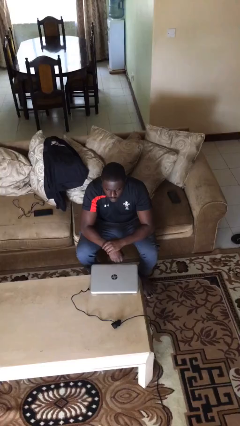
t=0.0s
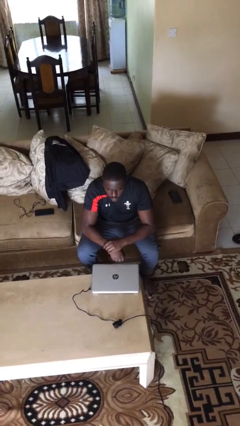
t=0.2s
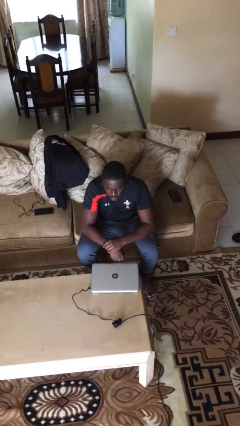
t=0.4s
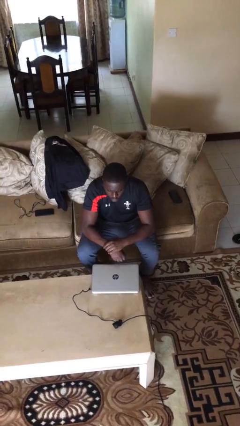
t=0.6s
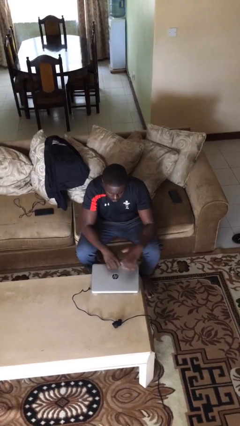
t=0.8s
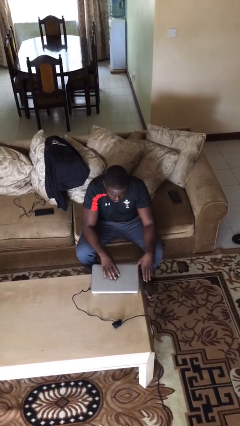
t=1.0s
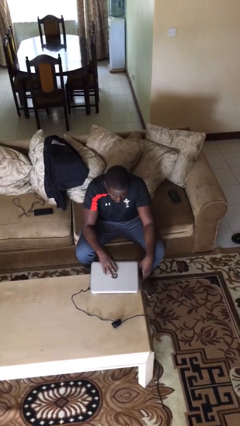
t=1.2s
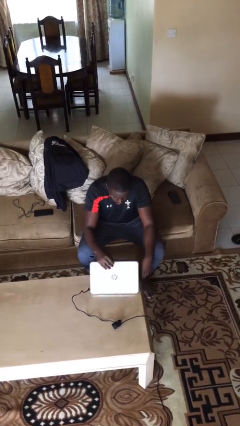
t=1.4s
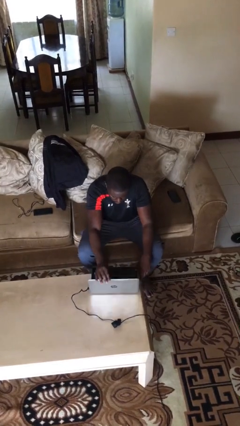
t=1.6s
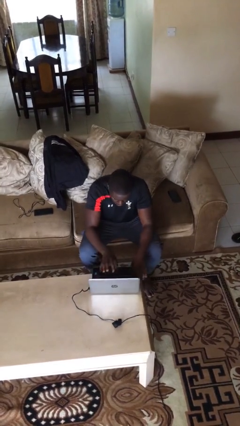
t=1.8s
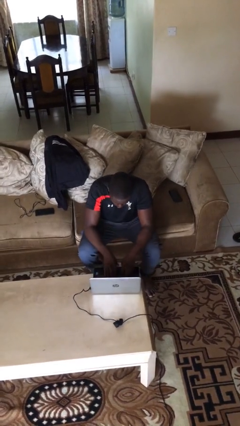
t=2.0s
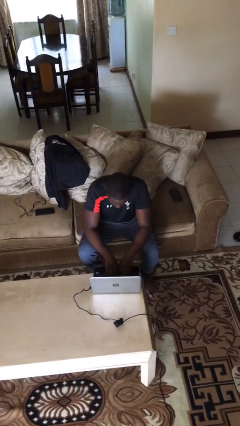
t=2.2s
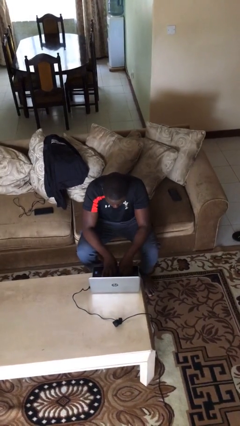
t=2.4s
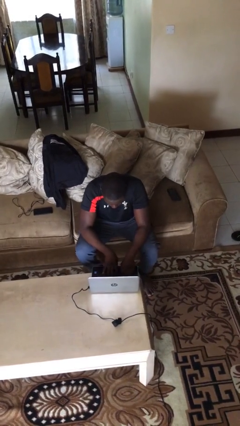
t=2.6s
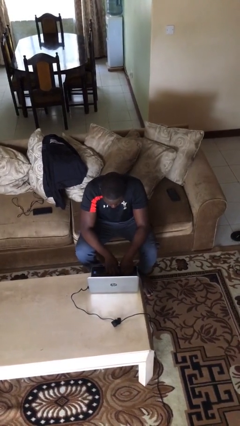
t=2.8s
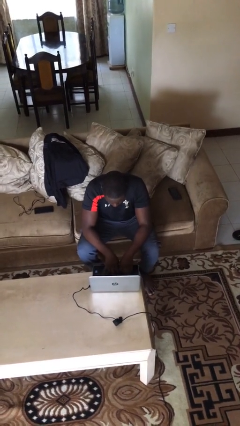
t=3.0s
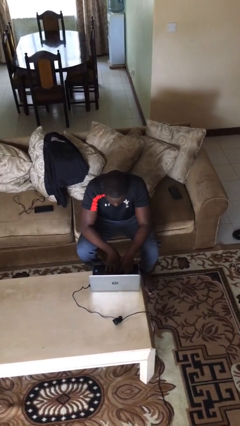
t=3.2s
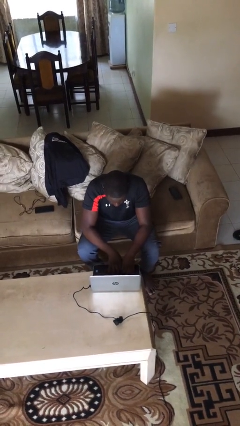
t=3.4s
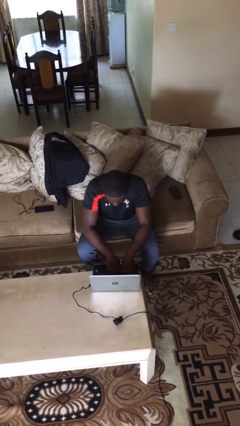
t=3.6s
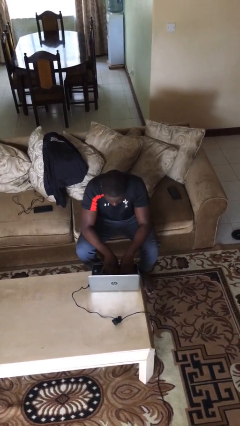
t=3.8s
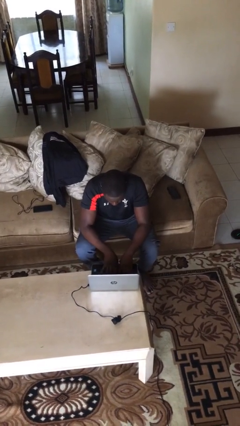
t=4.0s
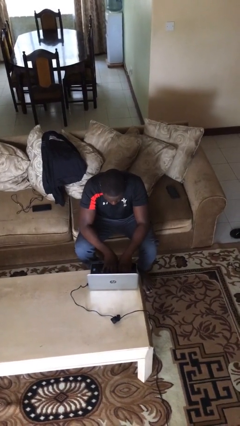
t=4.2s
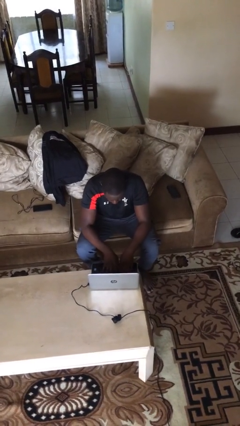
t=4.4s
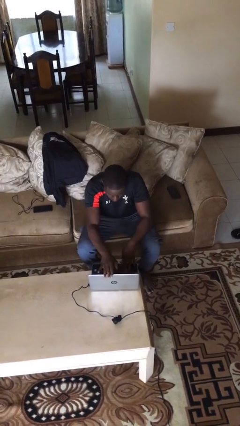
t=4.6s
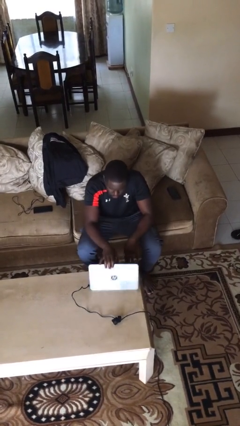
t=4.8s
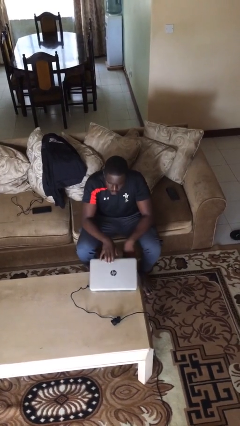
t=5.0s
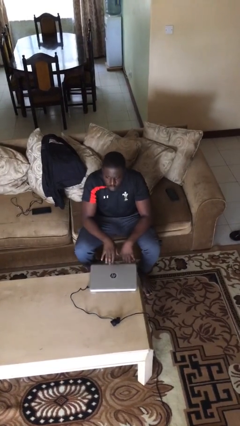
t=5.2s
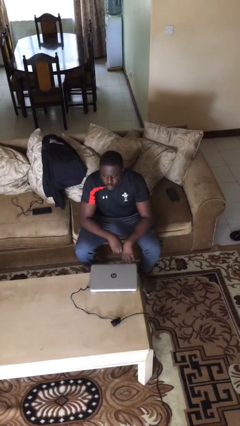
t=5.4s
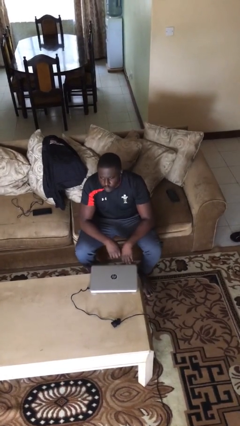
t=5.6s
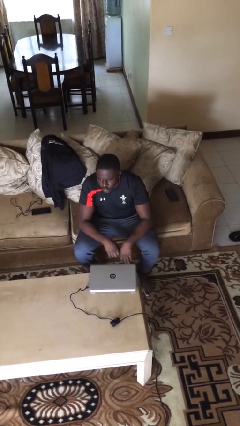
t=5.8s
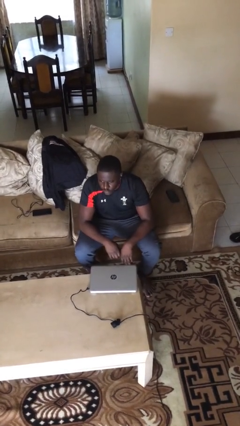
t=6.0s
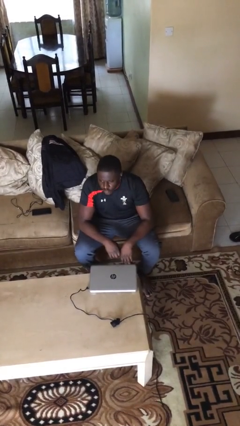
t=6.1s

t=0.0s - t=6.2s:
person interacts with laptop

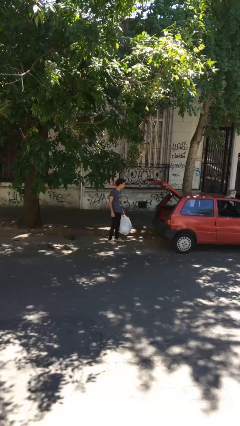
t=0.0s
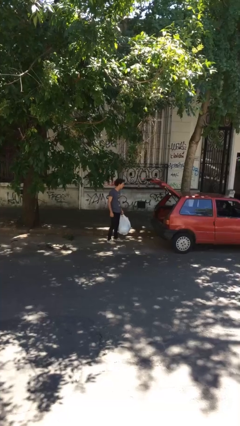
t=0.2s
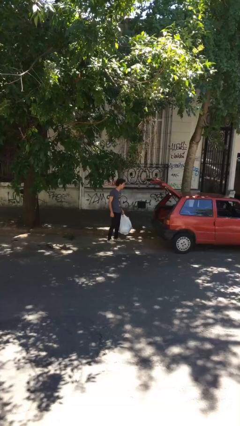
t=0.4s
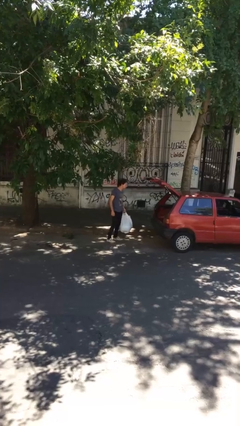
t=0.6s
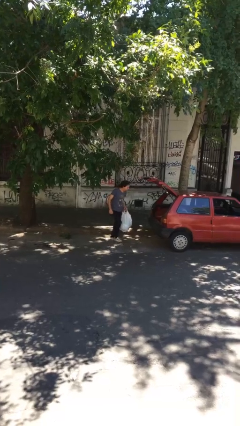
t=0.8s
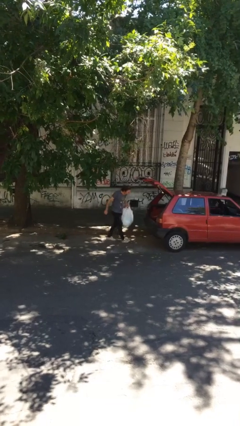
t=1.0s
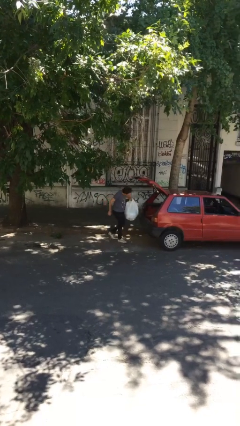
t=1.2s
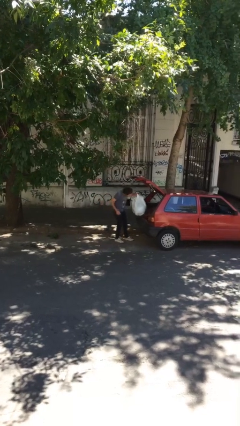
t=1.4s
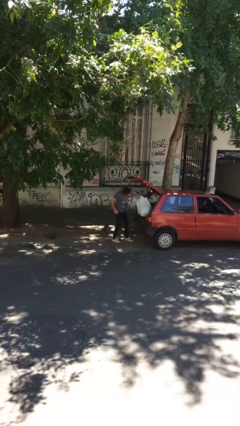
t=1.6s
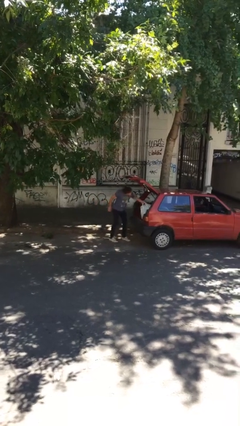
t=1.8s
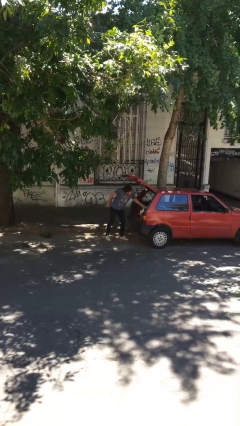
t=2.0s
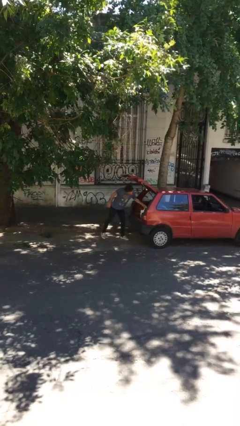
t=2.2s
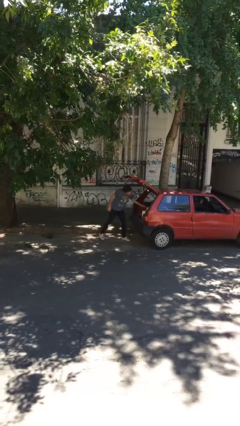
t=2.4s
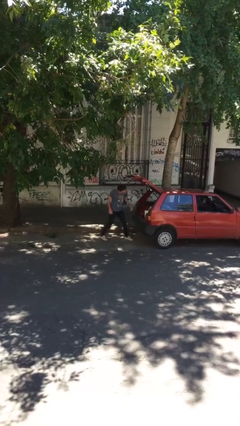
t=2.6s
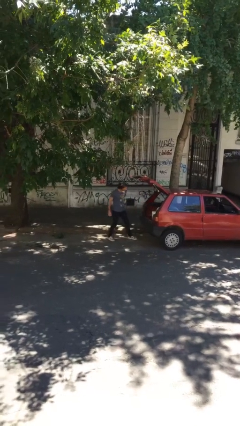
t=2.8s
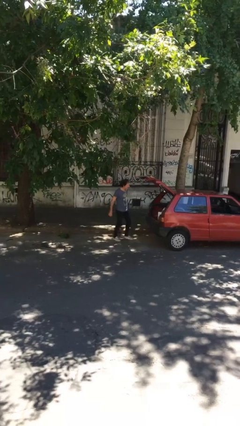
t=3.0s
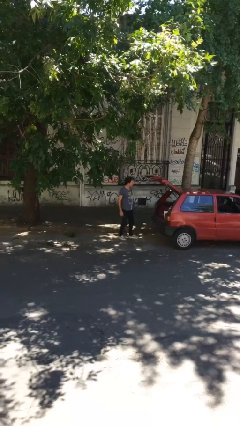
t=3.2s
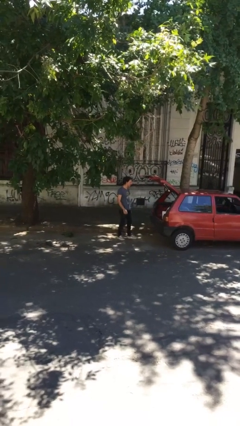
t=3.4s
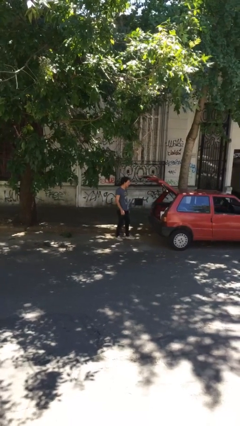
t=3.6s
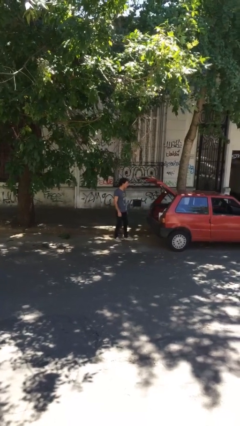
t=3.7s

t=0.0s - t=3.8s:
person loads car

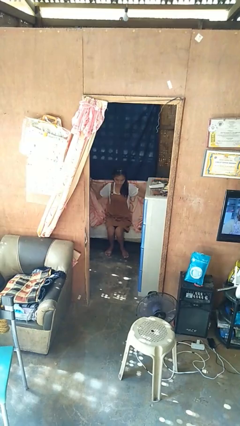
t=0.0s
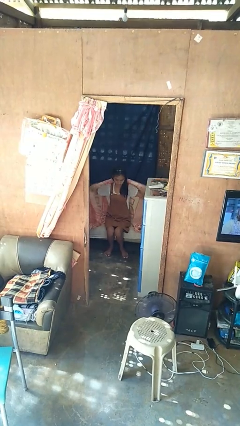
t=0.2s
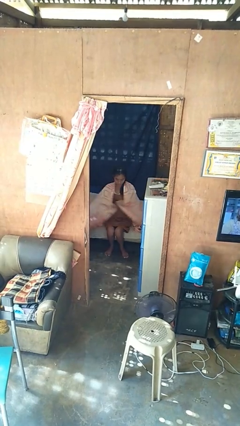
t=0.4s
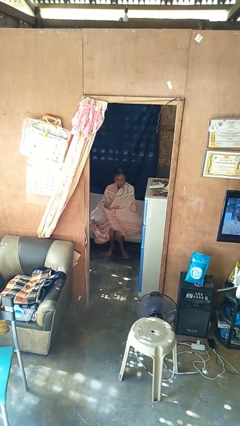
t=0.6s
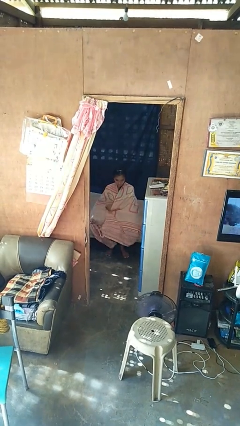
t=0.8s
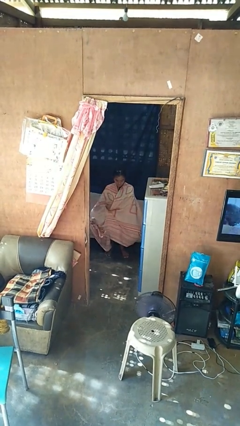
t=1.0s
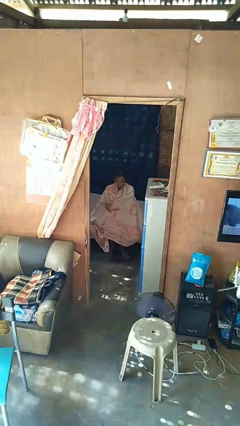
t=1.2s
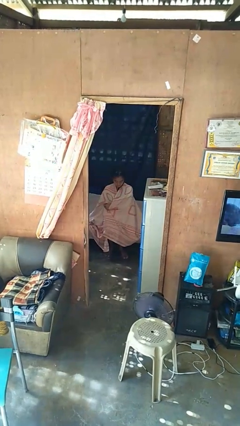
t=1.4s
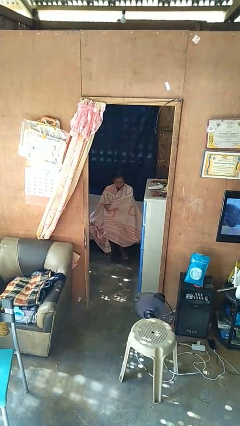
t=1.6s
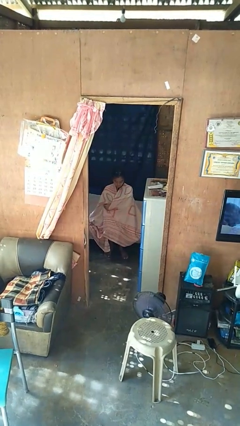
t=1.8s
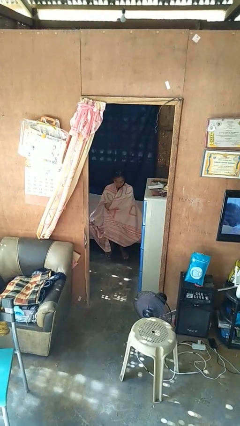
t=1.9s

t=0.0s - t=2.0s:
person covers with blanket

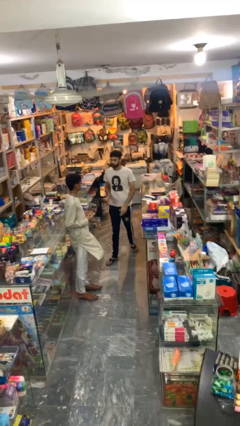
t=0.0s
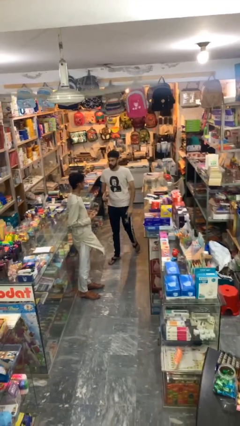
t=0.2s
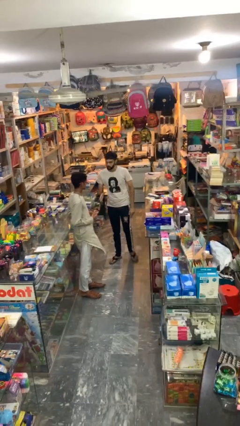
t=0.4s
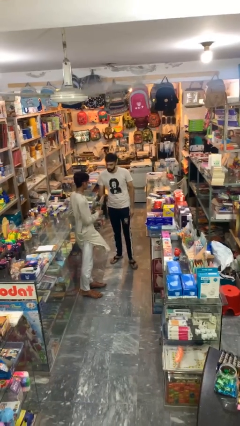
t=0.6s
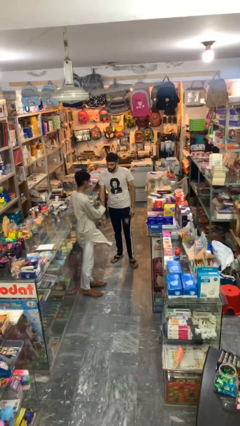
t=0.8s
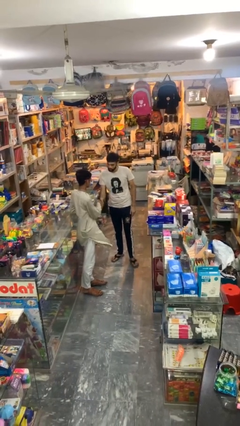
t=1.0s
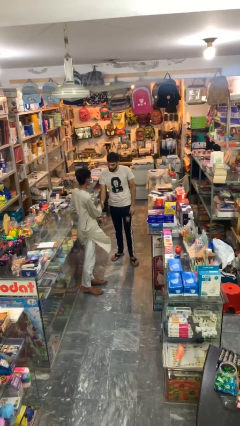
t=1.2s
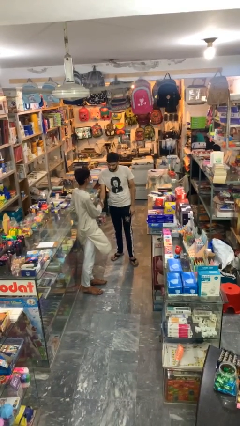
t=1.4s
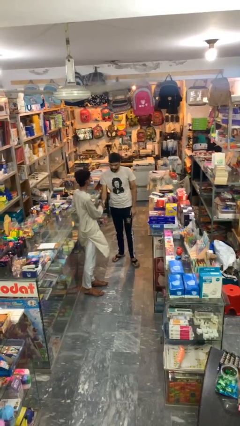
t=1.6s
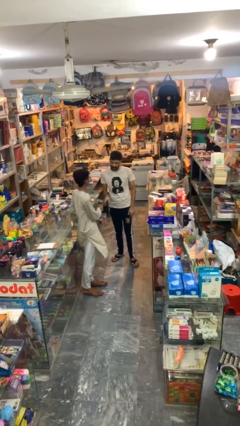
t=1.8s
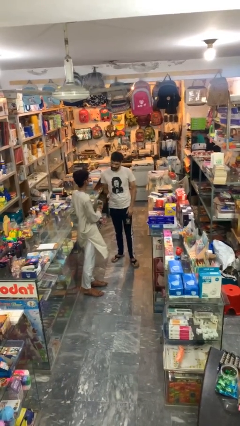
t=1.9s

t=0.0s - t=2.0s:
person shakes hand

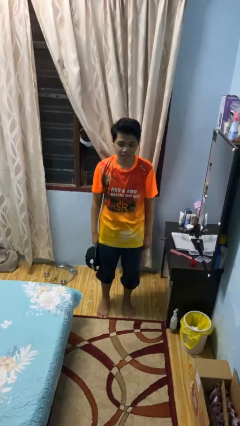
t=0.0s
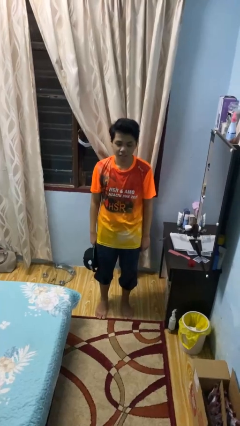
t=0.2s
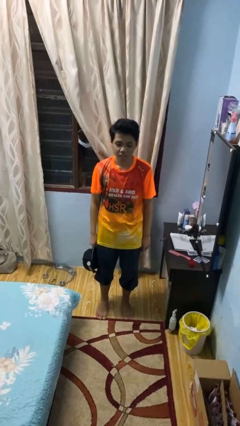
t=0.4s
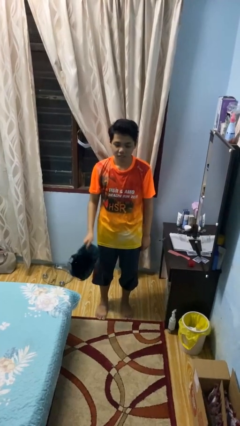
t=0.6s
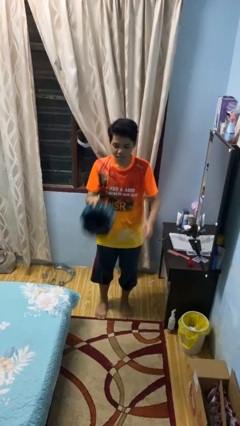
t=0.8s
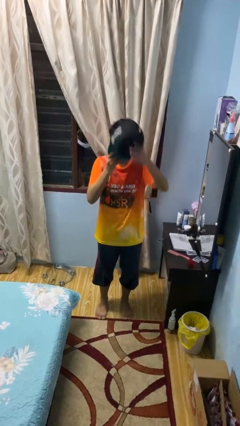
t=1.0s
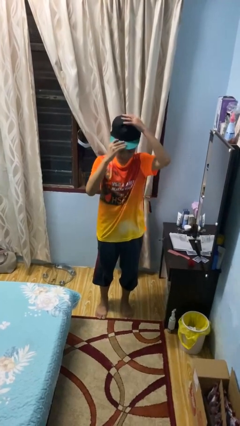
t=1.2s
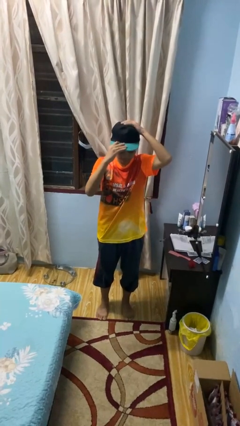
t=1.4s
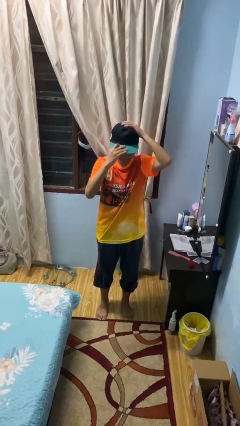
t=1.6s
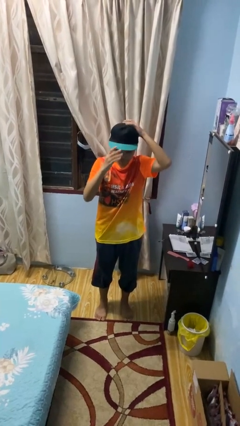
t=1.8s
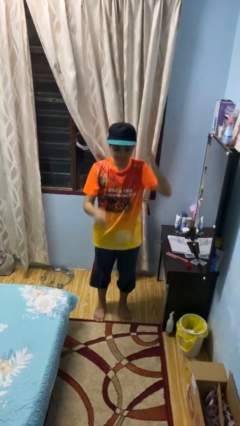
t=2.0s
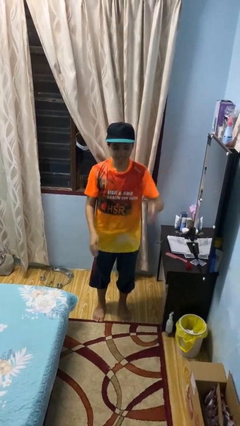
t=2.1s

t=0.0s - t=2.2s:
person puts on hat

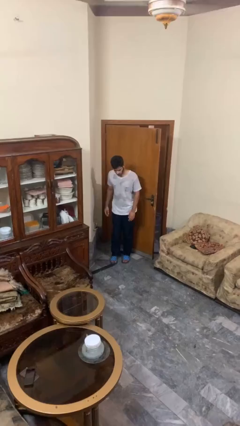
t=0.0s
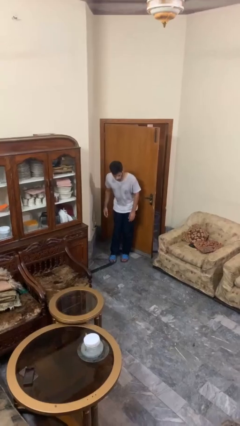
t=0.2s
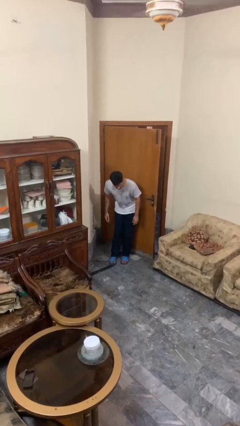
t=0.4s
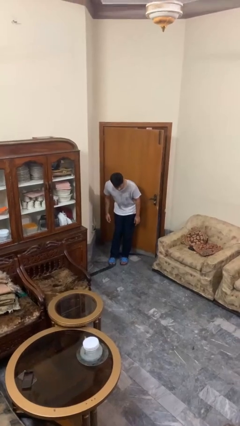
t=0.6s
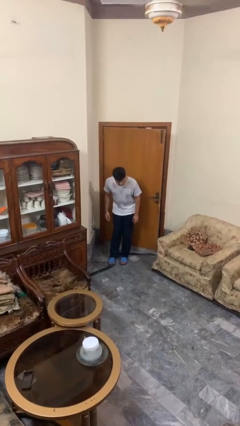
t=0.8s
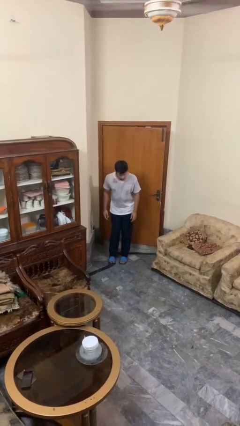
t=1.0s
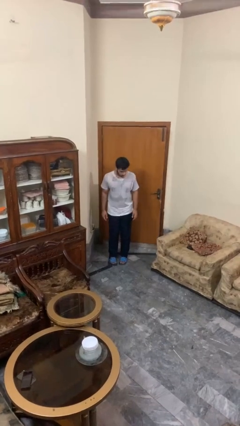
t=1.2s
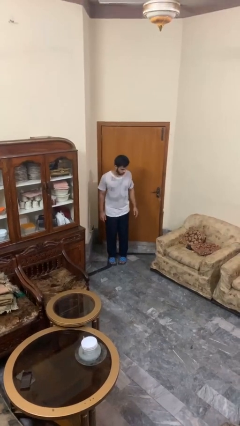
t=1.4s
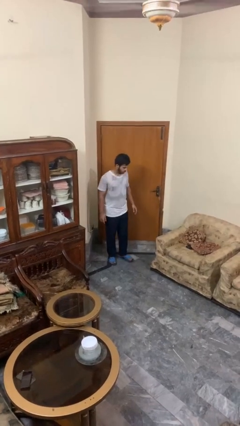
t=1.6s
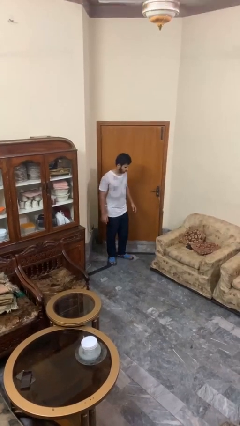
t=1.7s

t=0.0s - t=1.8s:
person closes door with hip
